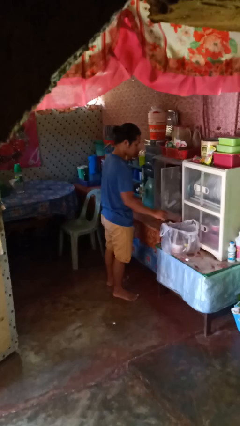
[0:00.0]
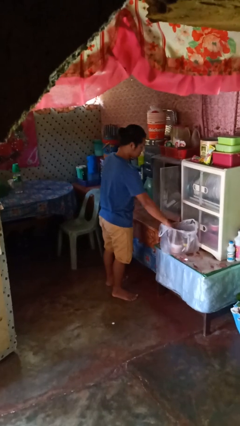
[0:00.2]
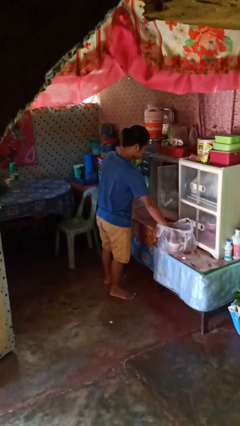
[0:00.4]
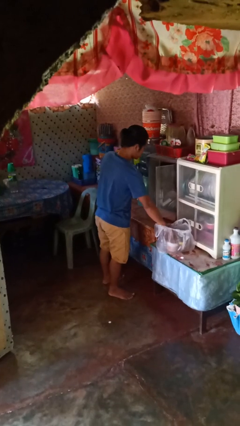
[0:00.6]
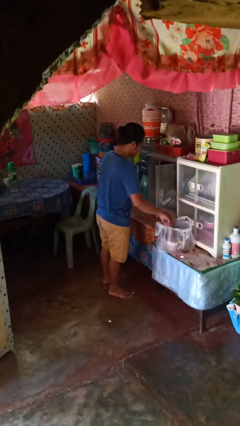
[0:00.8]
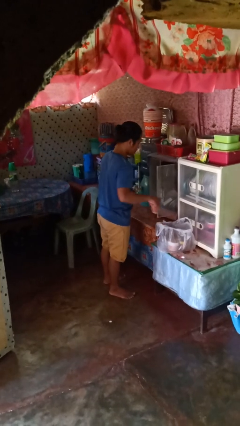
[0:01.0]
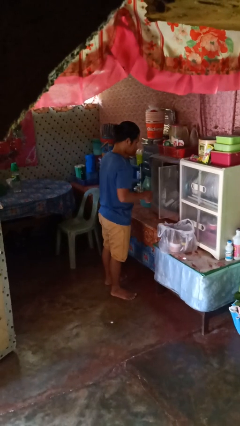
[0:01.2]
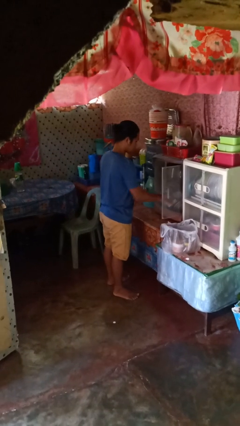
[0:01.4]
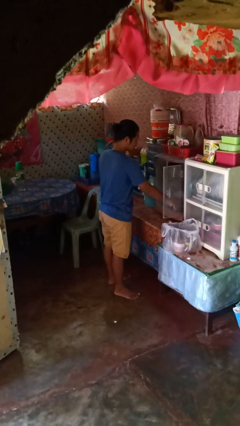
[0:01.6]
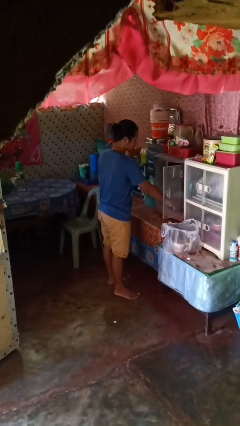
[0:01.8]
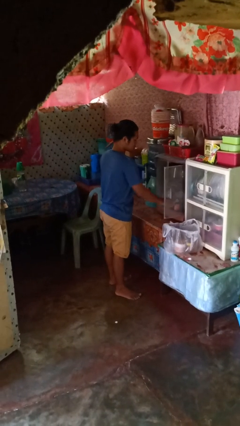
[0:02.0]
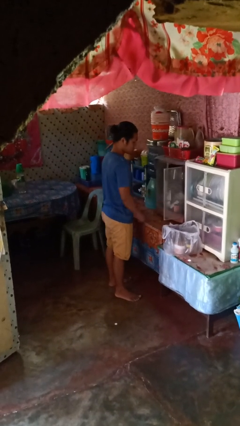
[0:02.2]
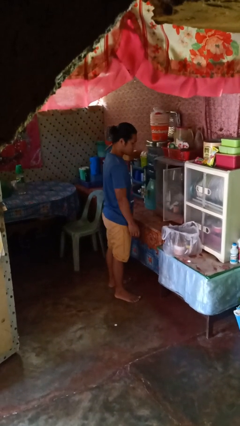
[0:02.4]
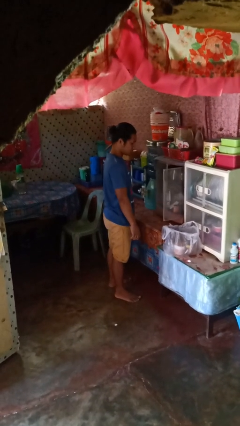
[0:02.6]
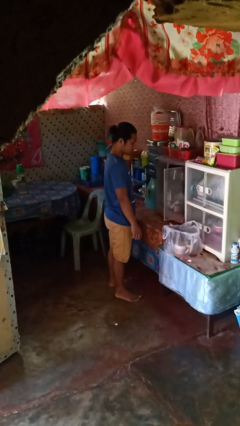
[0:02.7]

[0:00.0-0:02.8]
person loads groceries into cabinet

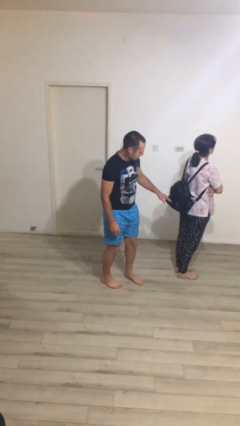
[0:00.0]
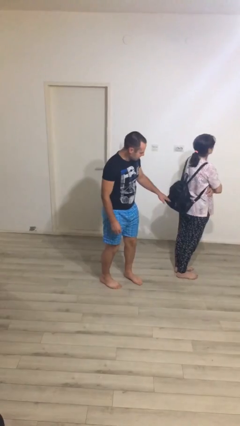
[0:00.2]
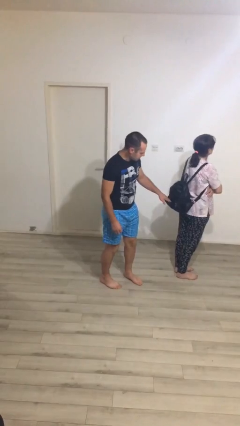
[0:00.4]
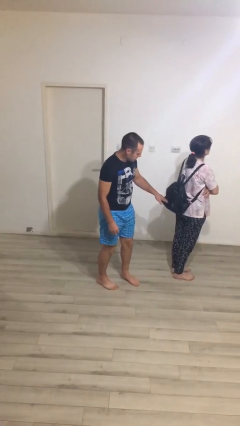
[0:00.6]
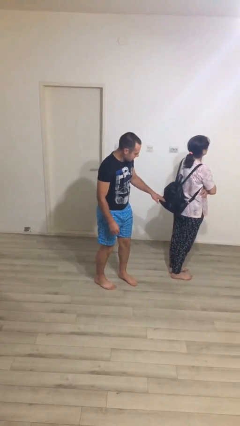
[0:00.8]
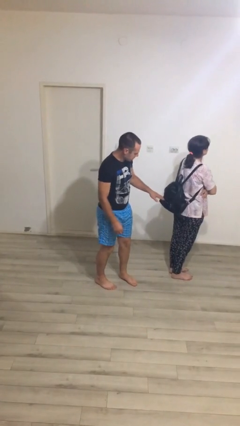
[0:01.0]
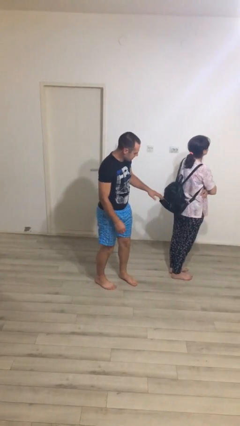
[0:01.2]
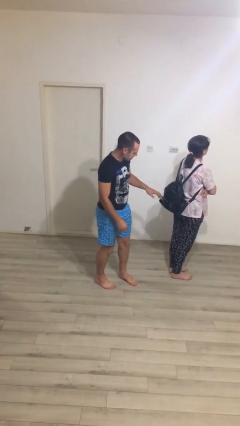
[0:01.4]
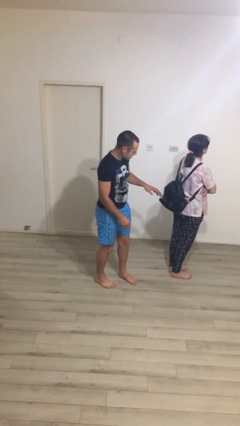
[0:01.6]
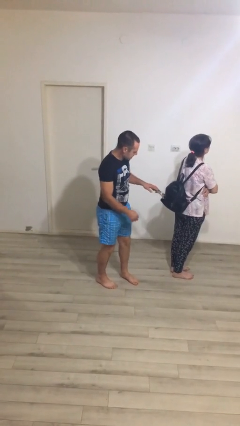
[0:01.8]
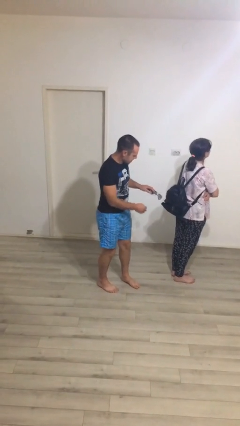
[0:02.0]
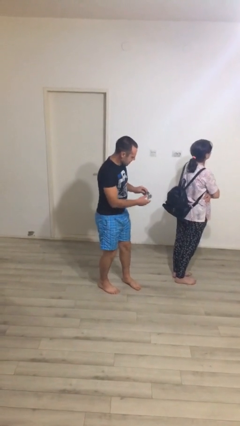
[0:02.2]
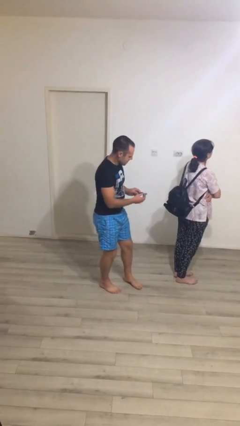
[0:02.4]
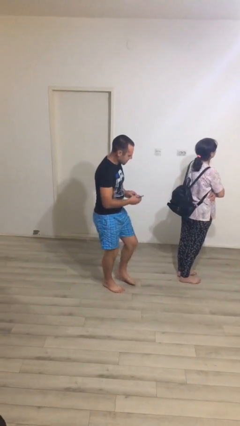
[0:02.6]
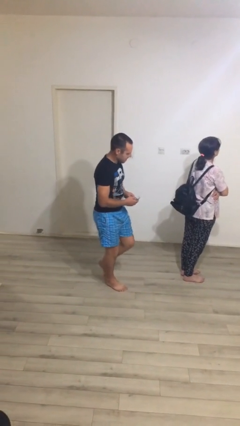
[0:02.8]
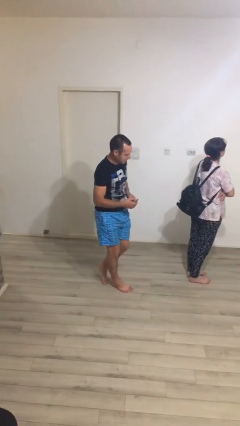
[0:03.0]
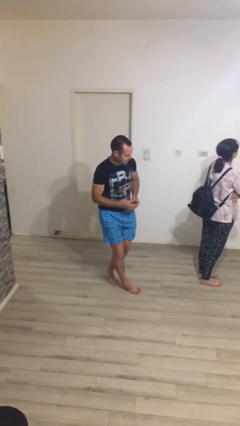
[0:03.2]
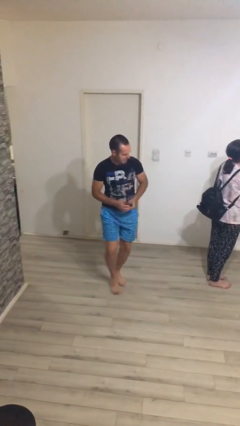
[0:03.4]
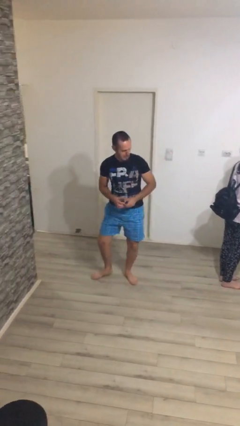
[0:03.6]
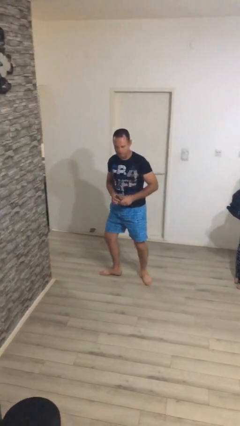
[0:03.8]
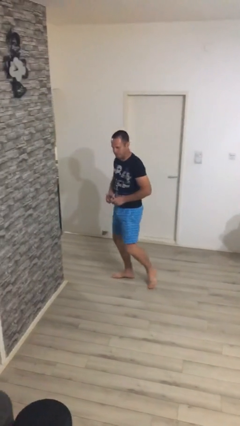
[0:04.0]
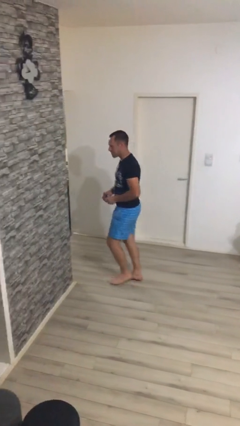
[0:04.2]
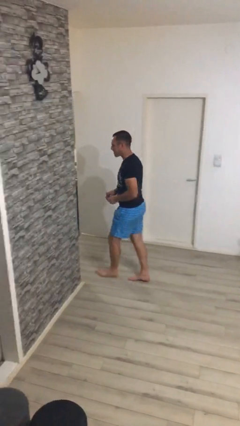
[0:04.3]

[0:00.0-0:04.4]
person steals object from person

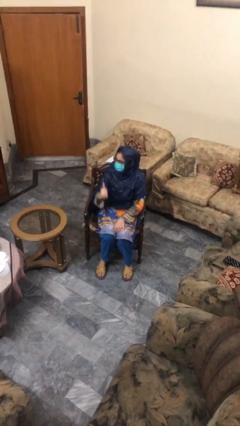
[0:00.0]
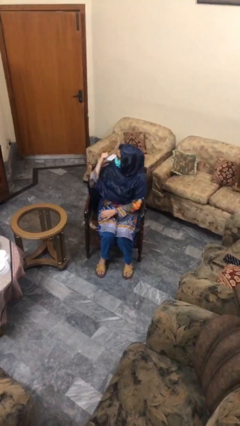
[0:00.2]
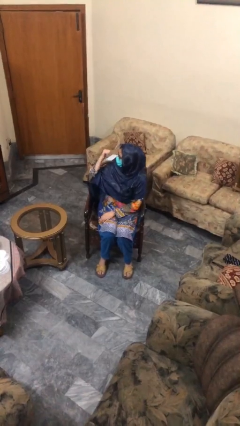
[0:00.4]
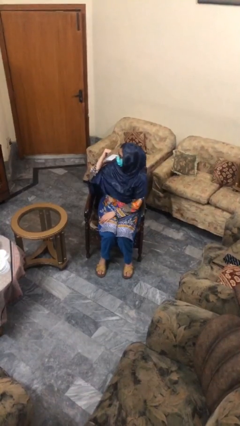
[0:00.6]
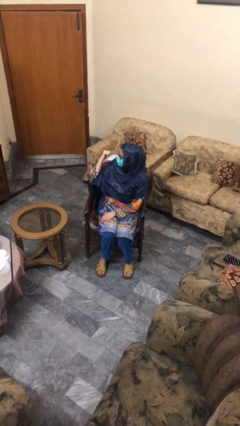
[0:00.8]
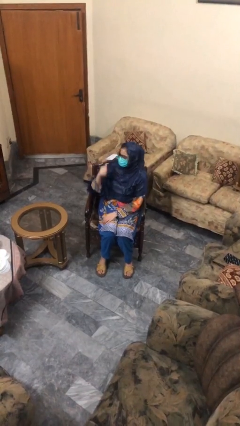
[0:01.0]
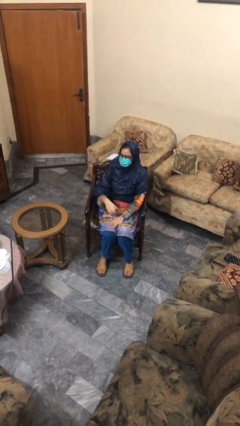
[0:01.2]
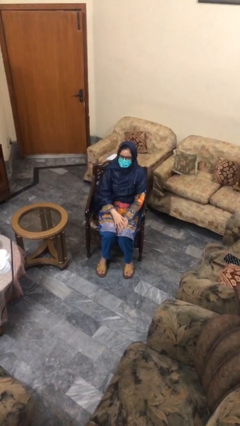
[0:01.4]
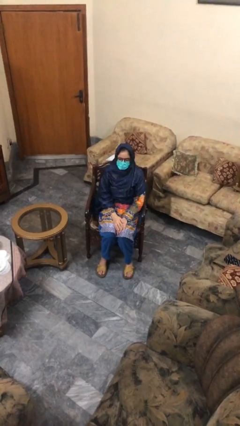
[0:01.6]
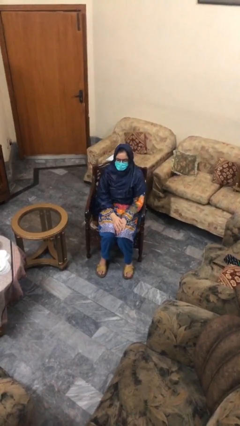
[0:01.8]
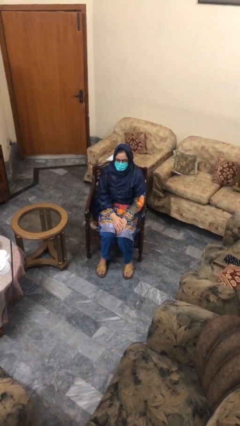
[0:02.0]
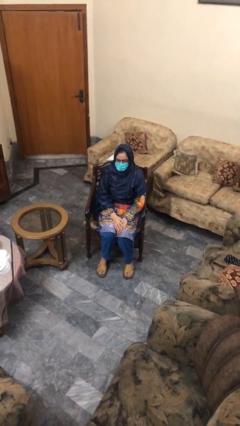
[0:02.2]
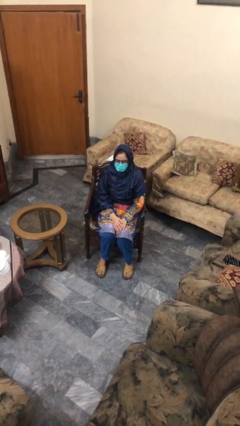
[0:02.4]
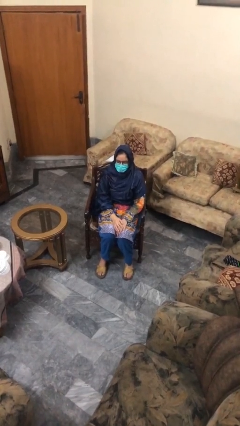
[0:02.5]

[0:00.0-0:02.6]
person gestures behind me

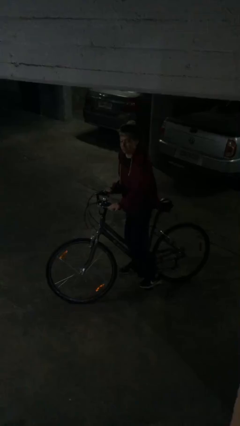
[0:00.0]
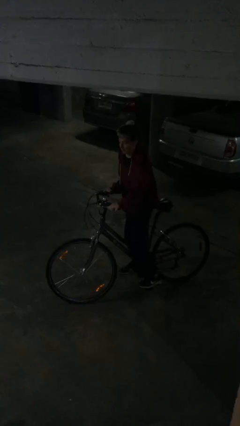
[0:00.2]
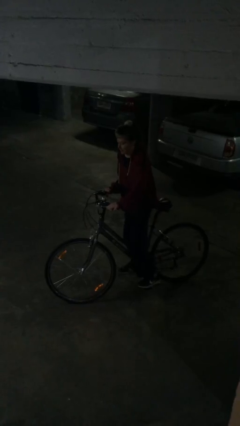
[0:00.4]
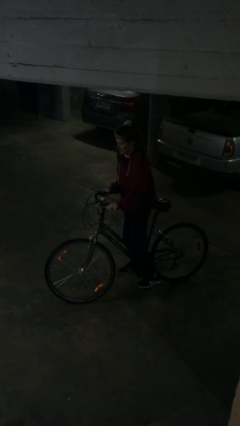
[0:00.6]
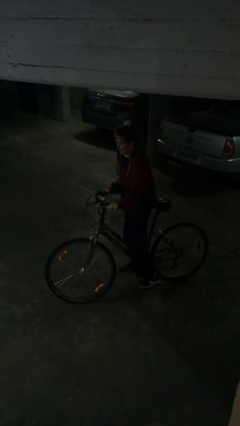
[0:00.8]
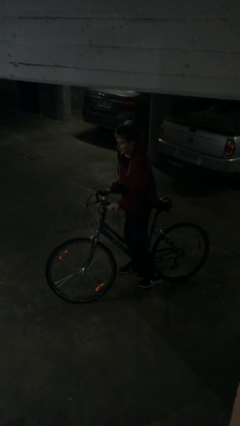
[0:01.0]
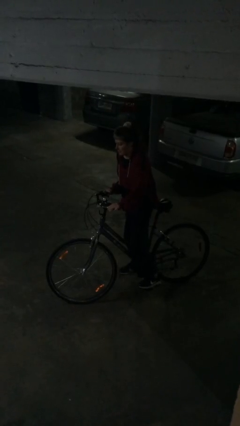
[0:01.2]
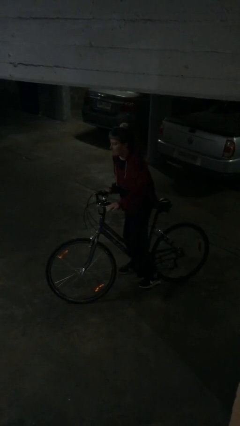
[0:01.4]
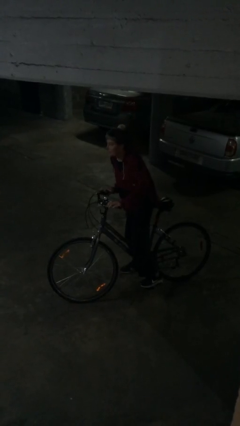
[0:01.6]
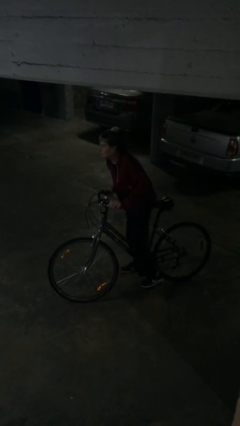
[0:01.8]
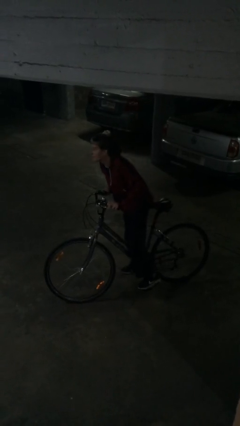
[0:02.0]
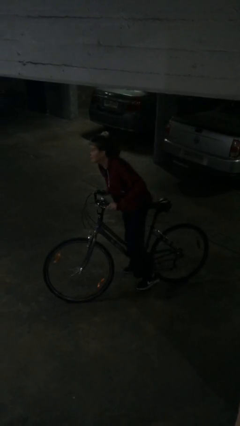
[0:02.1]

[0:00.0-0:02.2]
person rides bicycle

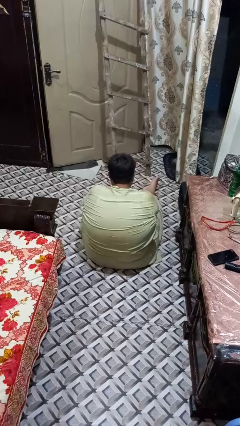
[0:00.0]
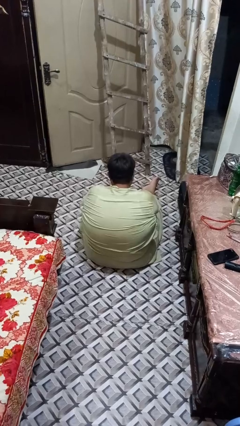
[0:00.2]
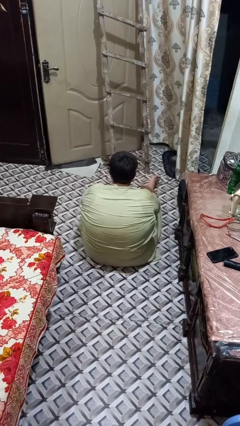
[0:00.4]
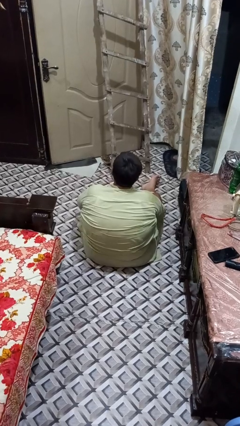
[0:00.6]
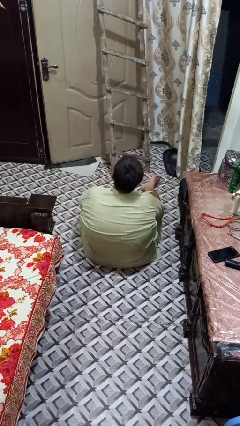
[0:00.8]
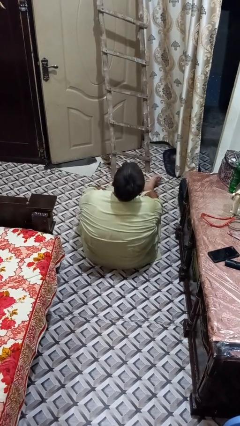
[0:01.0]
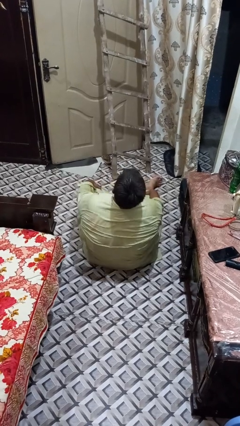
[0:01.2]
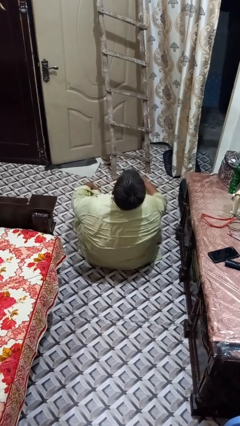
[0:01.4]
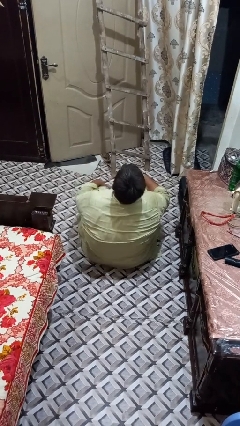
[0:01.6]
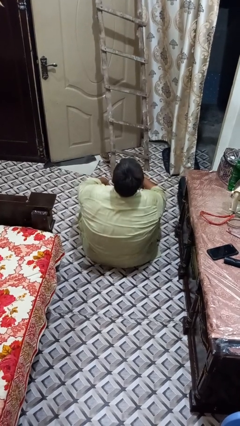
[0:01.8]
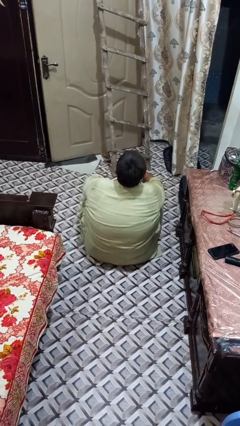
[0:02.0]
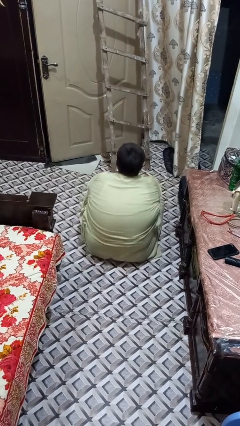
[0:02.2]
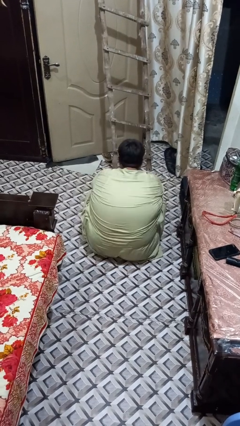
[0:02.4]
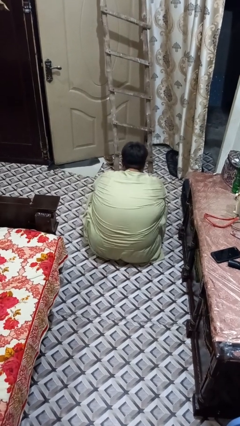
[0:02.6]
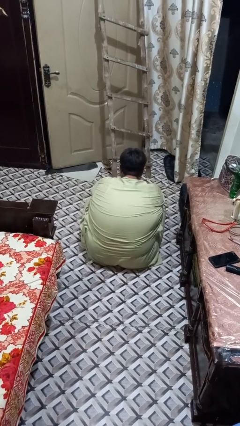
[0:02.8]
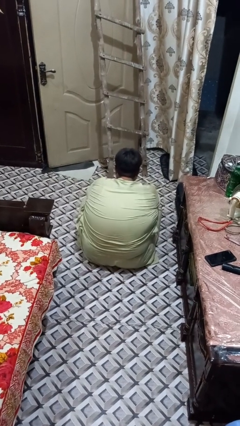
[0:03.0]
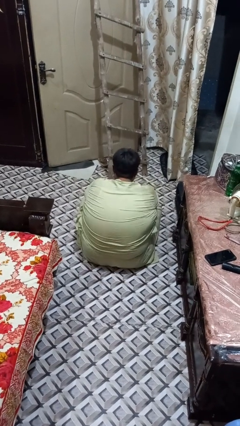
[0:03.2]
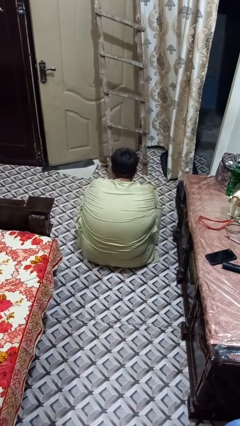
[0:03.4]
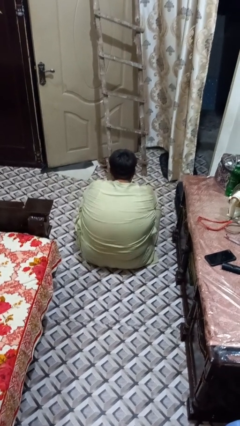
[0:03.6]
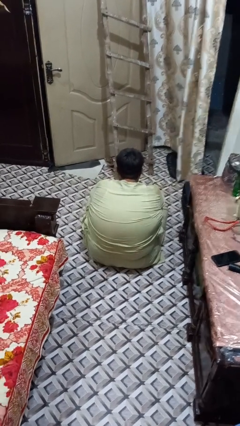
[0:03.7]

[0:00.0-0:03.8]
person crosses legs

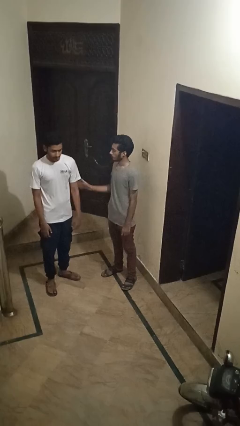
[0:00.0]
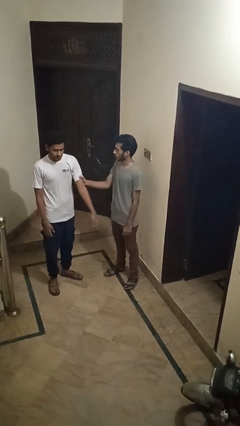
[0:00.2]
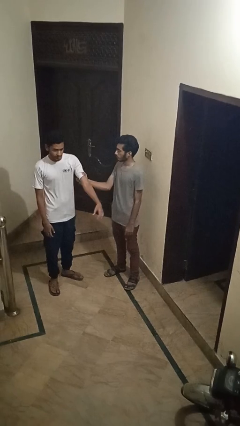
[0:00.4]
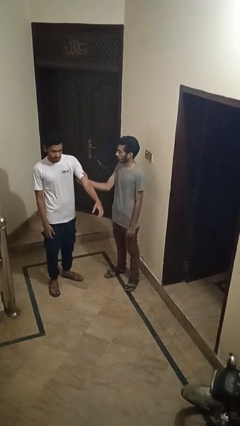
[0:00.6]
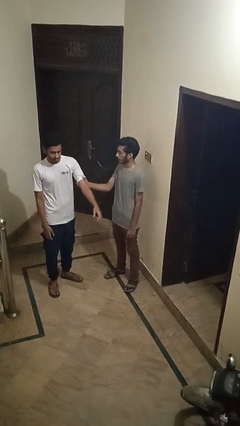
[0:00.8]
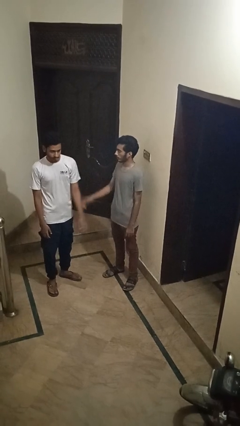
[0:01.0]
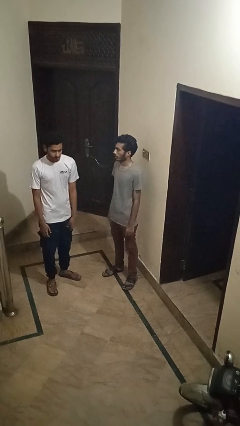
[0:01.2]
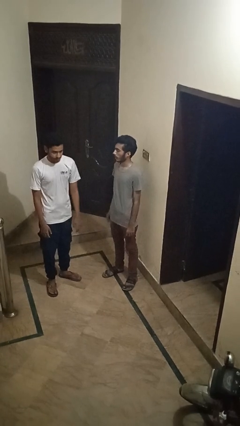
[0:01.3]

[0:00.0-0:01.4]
person grabs person by bicep
